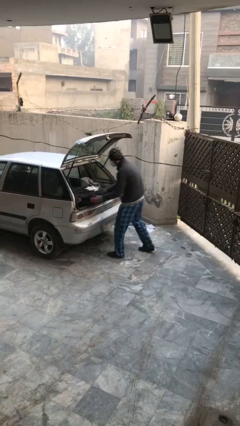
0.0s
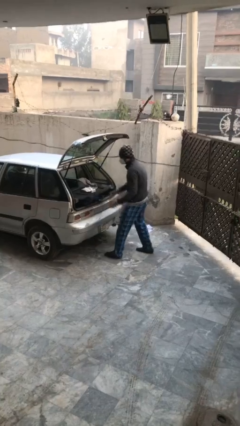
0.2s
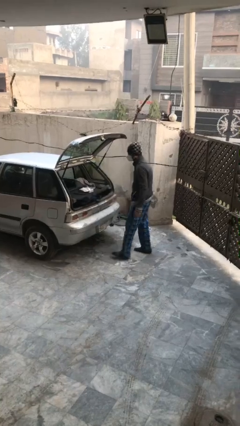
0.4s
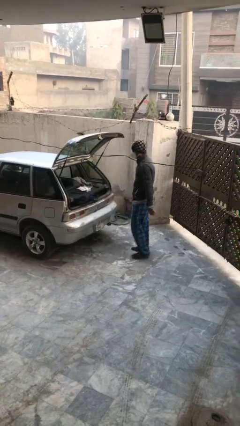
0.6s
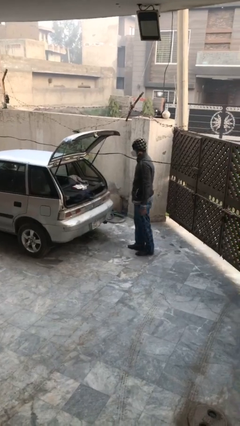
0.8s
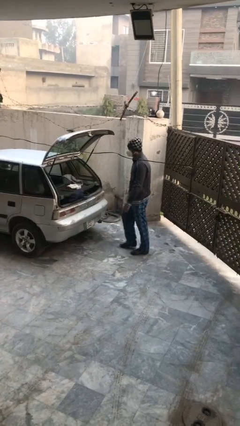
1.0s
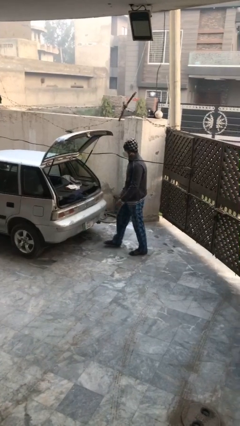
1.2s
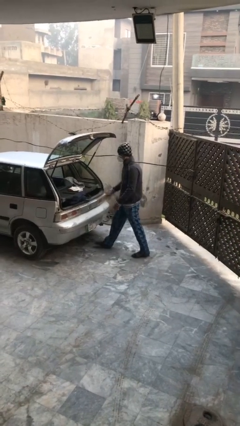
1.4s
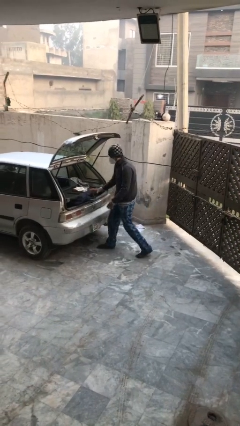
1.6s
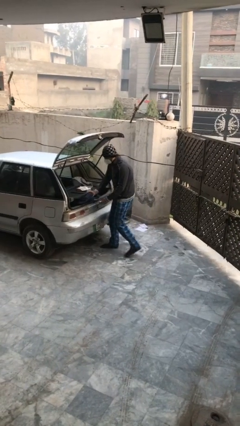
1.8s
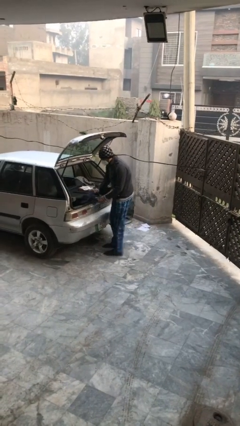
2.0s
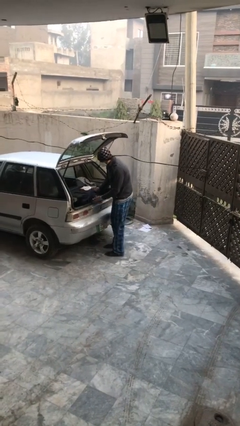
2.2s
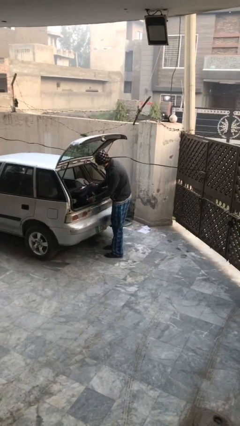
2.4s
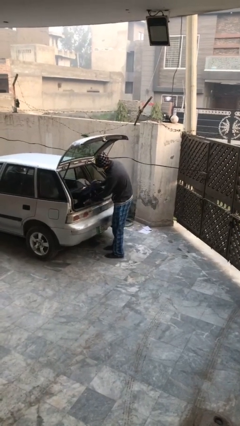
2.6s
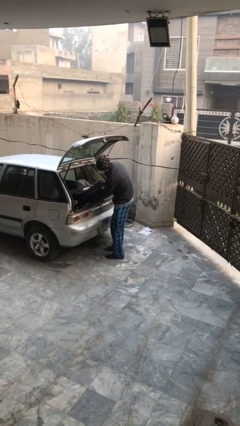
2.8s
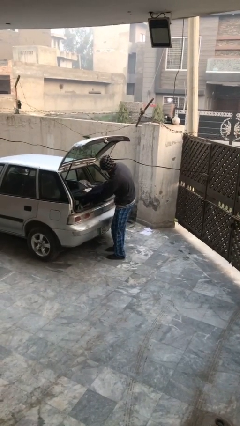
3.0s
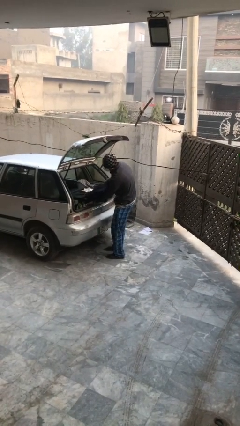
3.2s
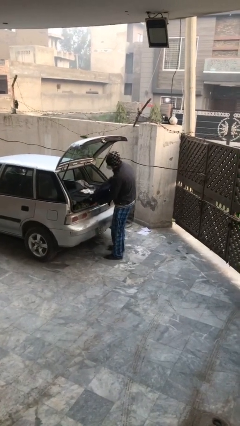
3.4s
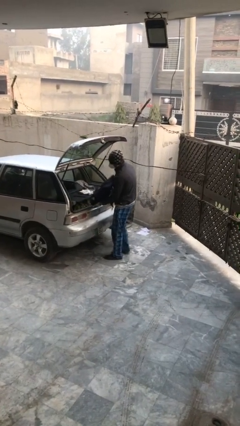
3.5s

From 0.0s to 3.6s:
person unloads car

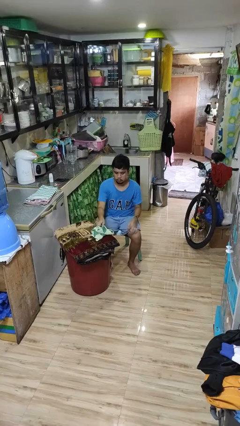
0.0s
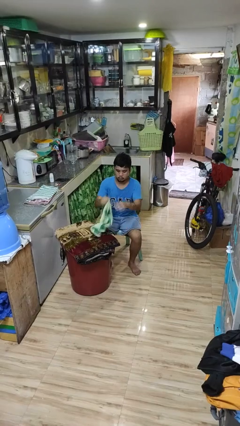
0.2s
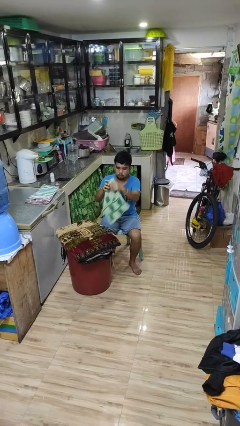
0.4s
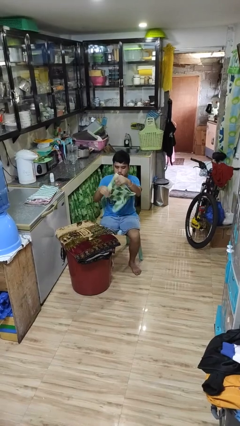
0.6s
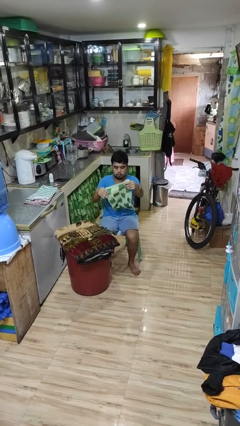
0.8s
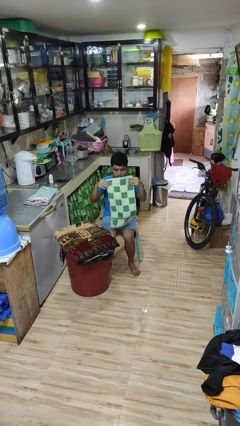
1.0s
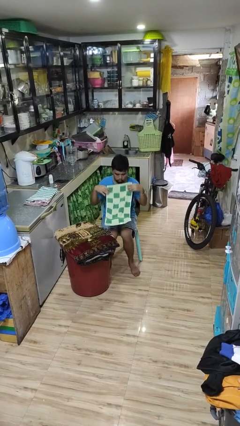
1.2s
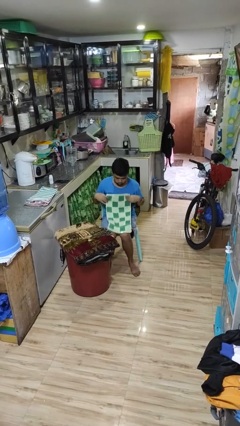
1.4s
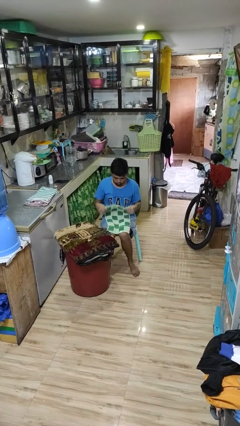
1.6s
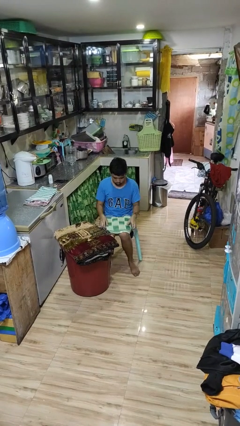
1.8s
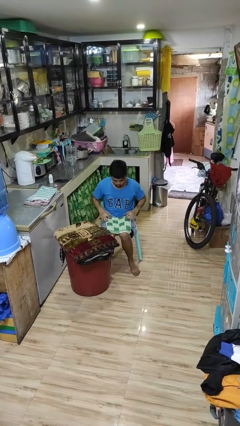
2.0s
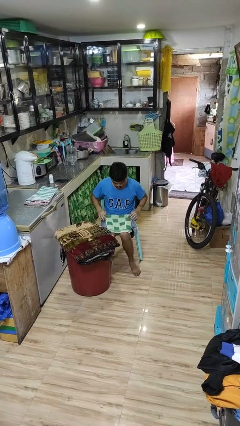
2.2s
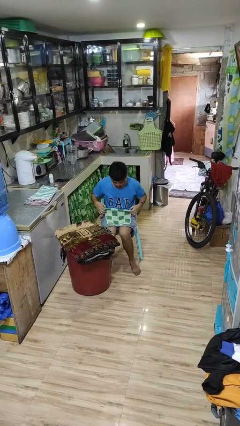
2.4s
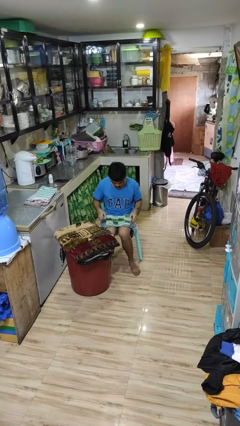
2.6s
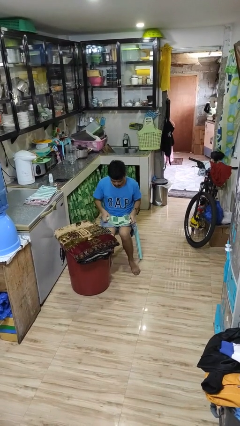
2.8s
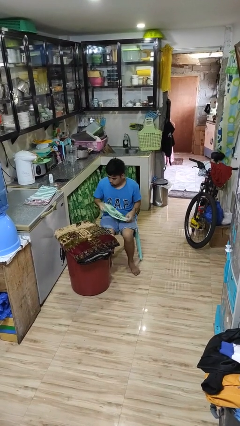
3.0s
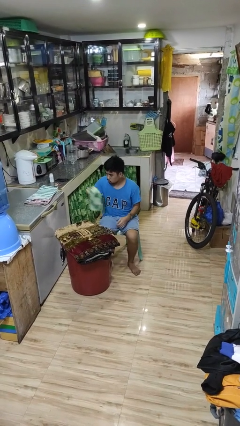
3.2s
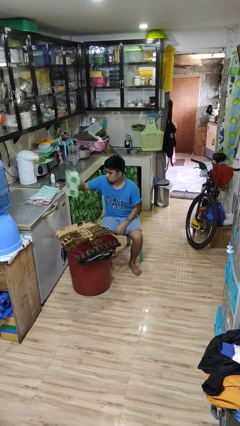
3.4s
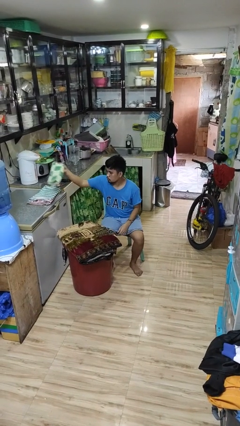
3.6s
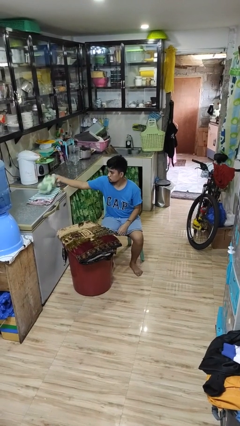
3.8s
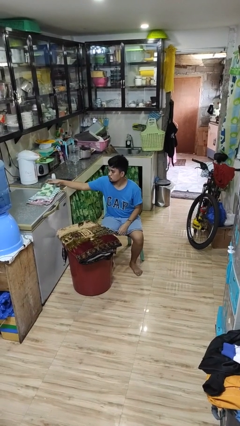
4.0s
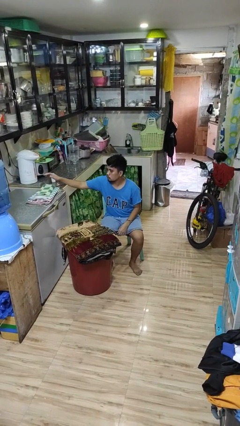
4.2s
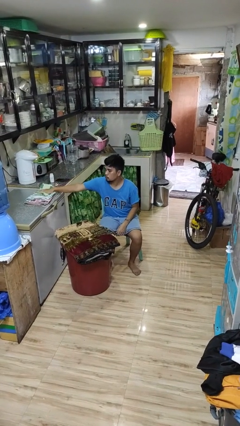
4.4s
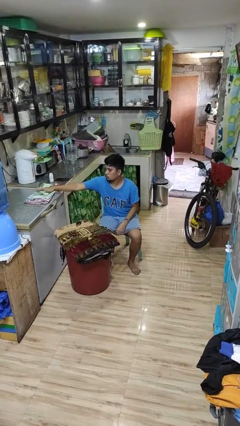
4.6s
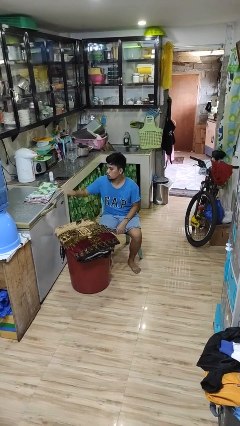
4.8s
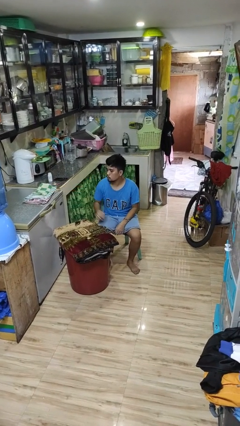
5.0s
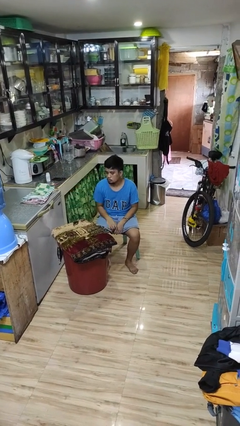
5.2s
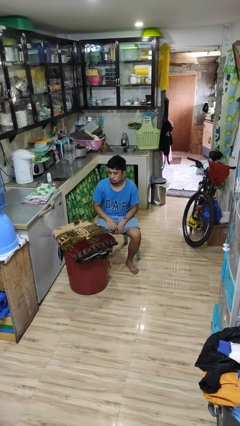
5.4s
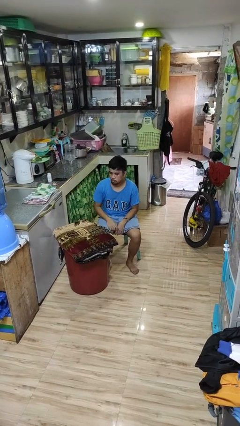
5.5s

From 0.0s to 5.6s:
person folds towel

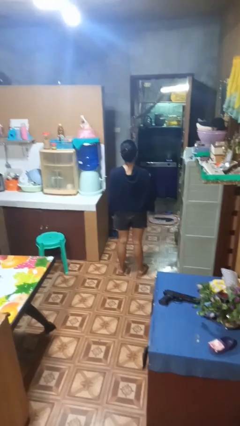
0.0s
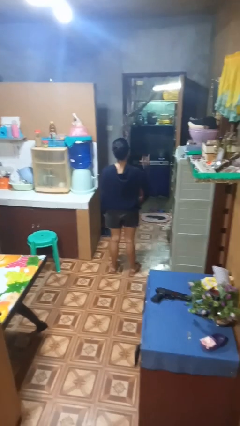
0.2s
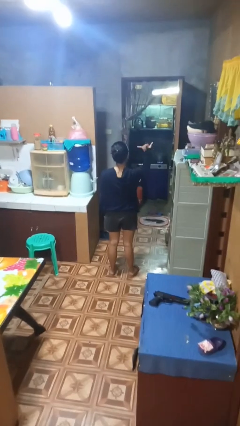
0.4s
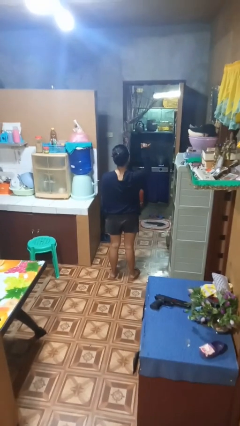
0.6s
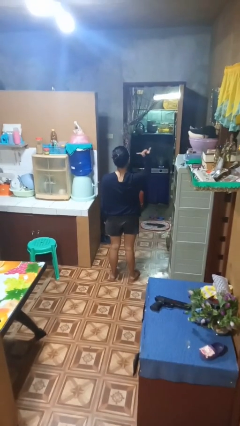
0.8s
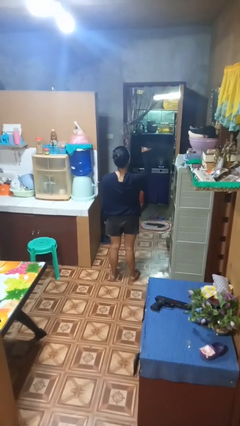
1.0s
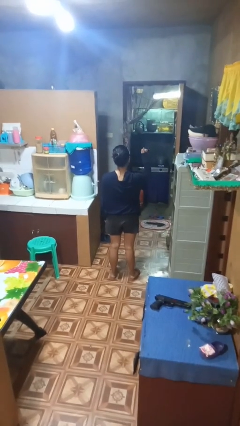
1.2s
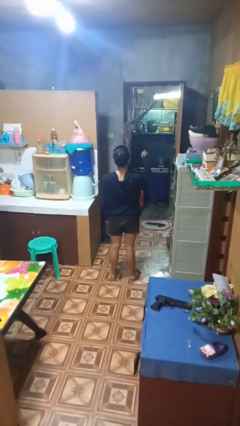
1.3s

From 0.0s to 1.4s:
person gestures hang loose

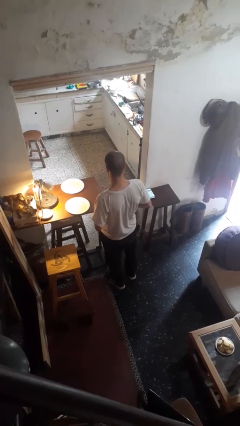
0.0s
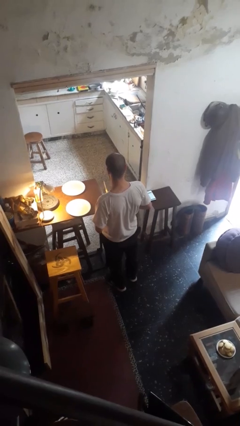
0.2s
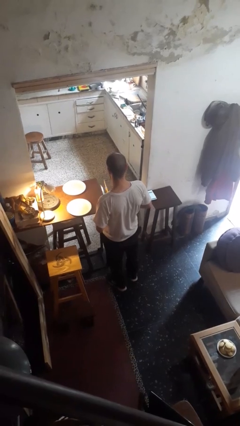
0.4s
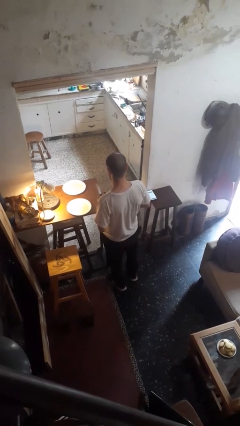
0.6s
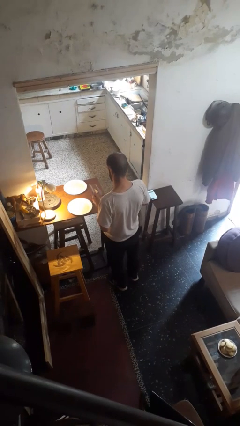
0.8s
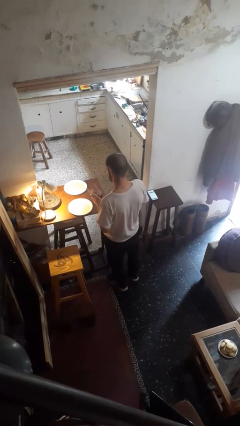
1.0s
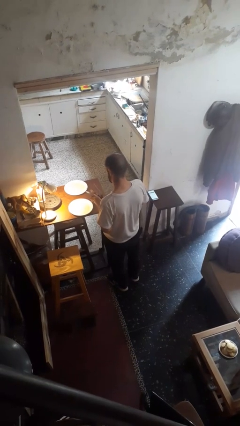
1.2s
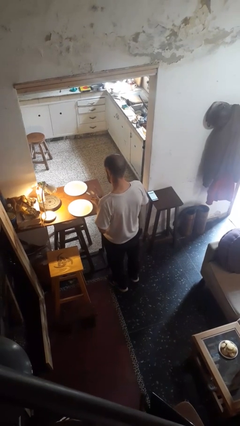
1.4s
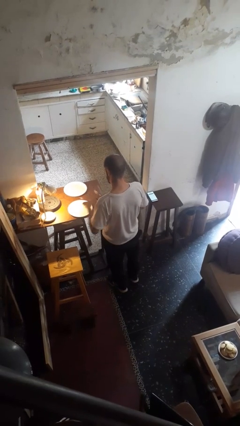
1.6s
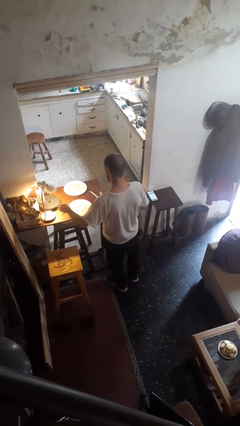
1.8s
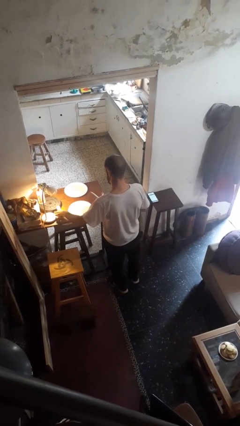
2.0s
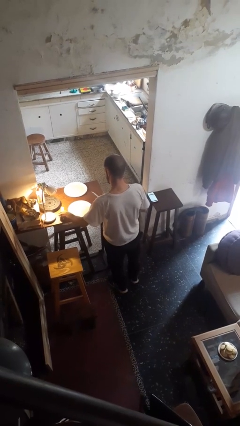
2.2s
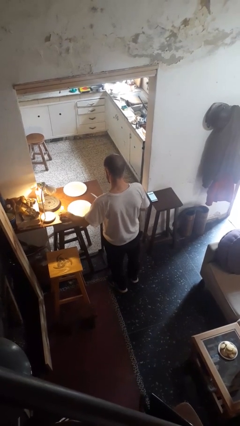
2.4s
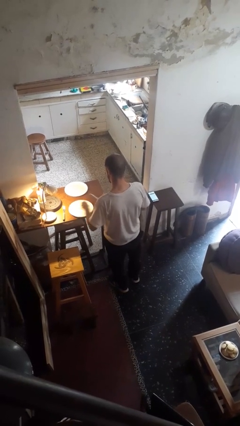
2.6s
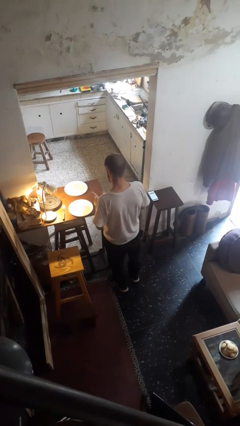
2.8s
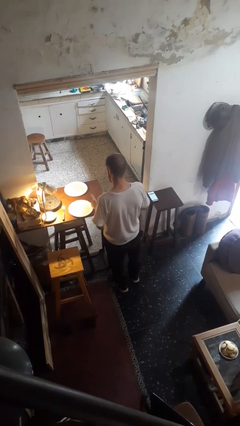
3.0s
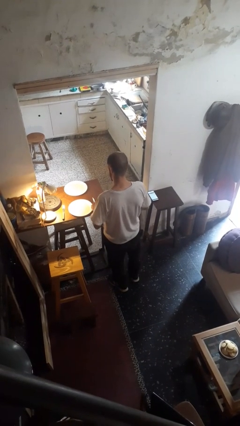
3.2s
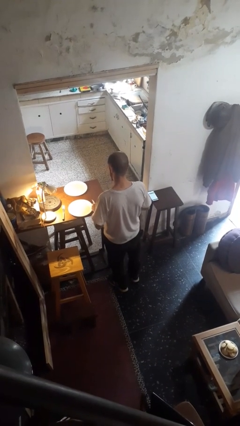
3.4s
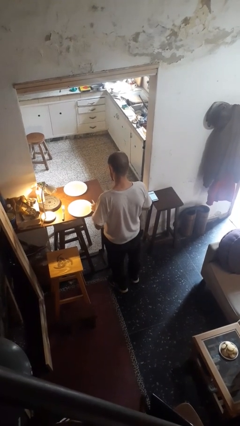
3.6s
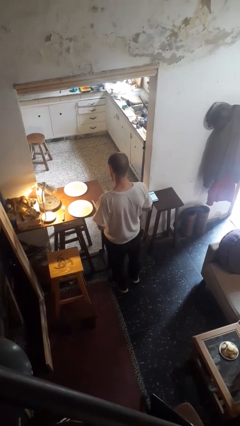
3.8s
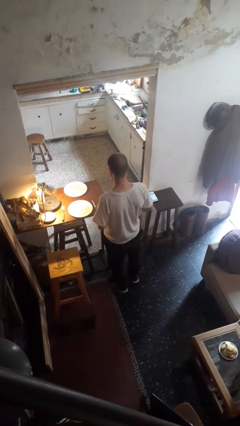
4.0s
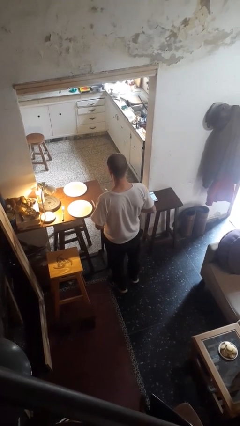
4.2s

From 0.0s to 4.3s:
person sets table

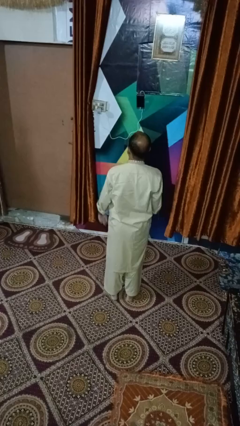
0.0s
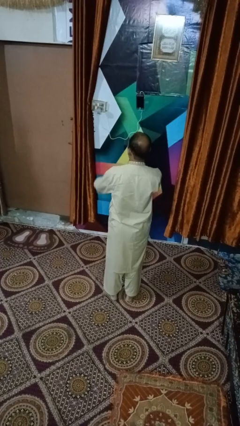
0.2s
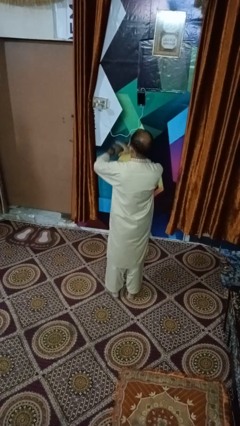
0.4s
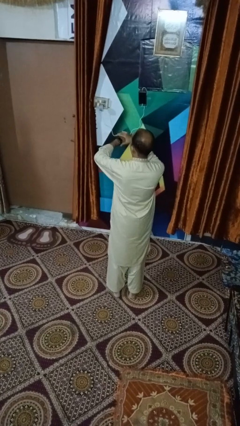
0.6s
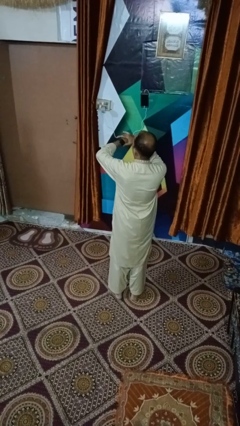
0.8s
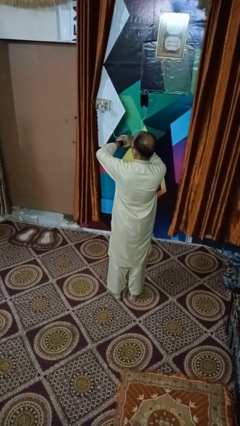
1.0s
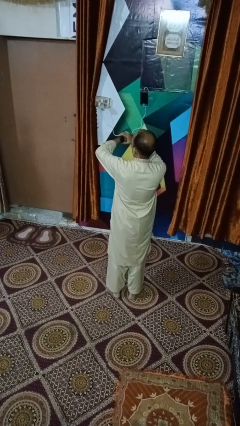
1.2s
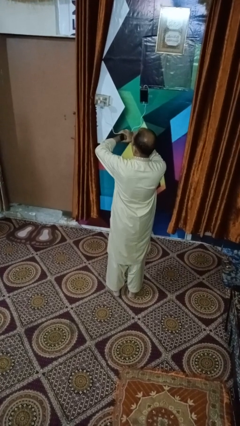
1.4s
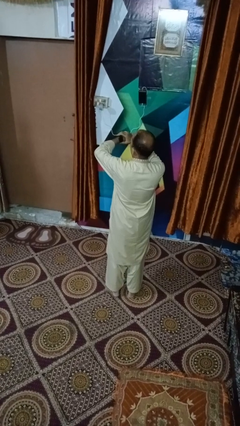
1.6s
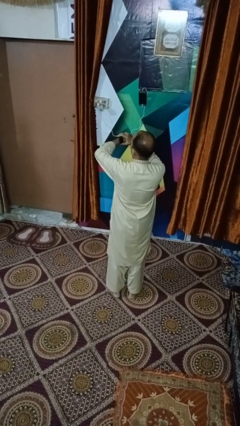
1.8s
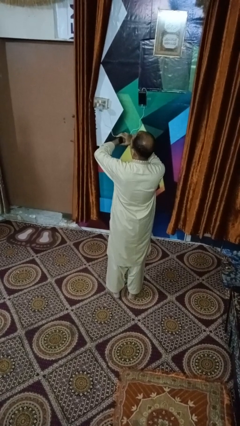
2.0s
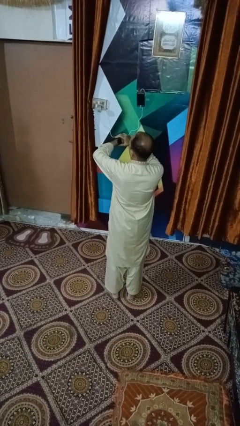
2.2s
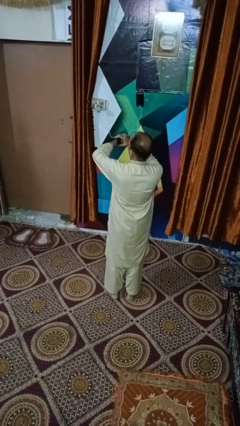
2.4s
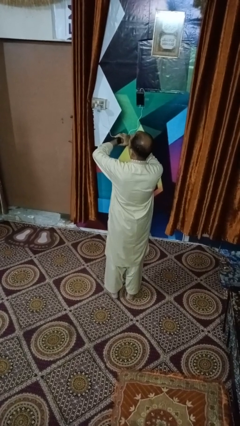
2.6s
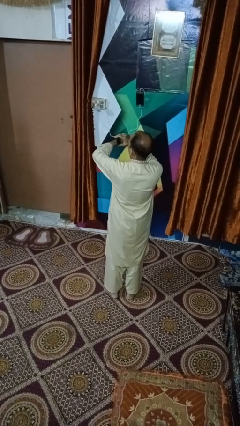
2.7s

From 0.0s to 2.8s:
person looks at wristwatch
